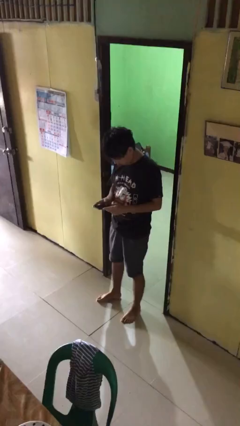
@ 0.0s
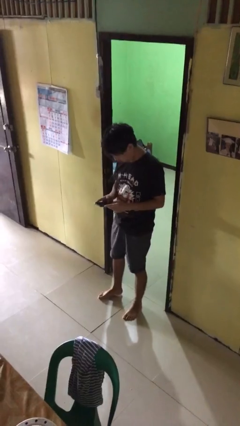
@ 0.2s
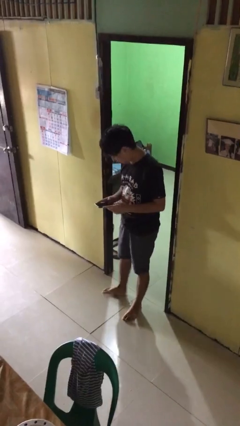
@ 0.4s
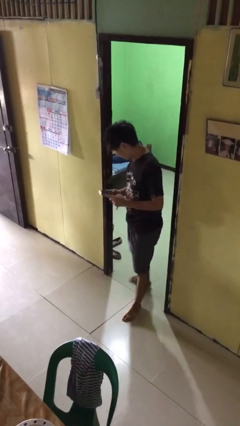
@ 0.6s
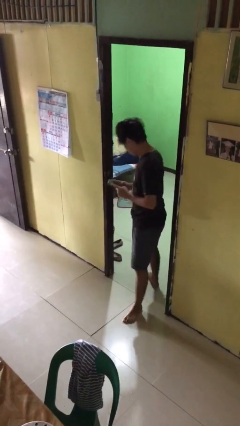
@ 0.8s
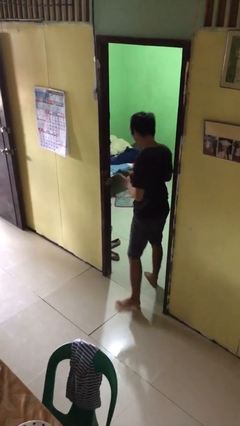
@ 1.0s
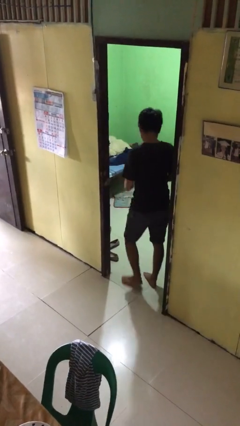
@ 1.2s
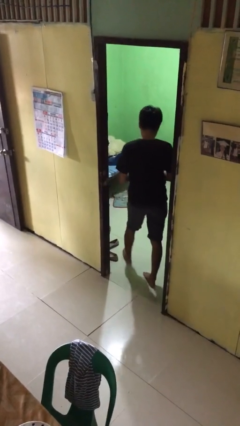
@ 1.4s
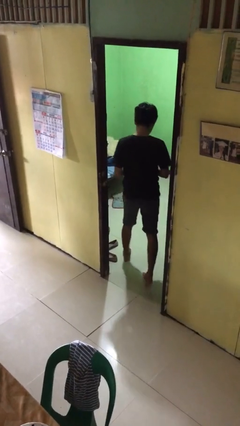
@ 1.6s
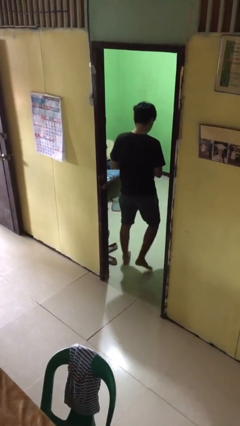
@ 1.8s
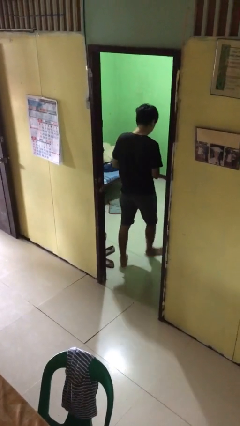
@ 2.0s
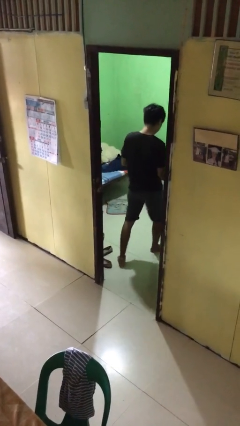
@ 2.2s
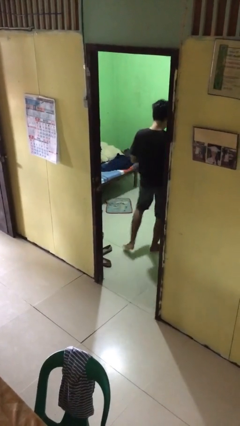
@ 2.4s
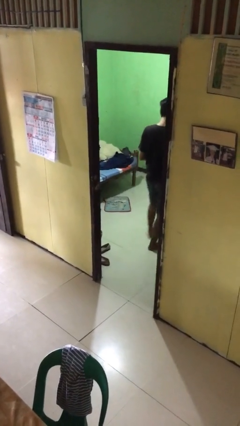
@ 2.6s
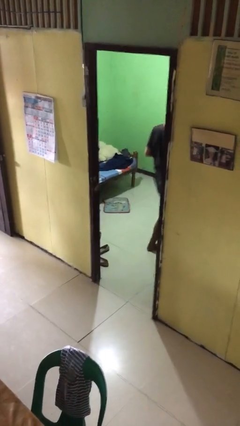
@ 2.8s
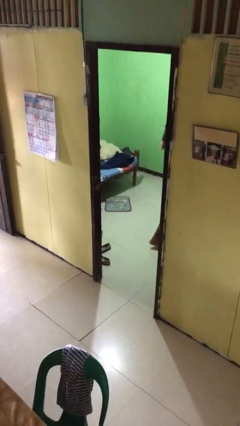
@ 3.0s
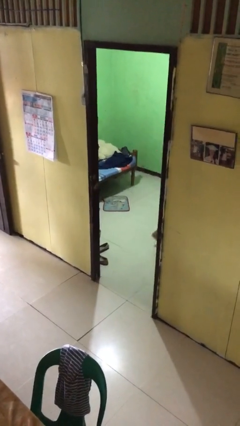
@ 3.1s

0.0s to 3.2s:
person exits scene through structure

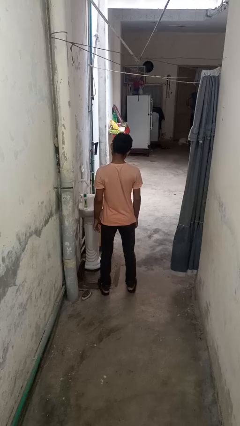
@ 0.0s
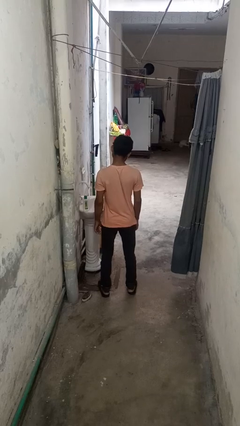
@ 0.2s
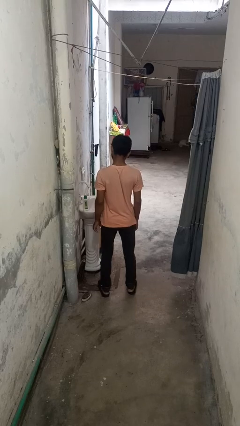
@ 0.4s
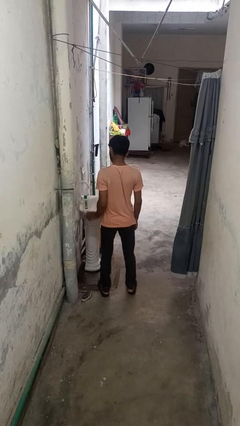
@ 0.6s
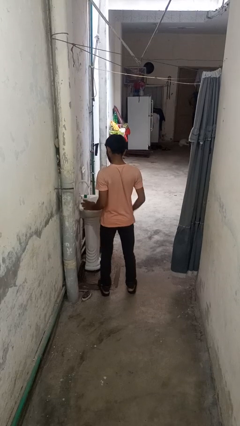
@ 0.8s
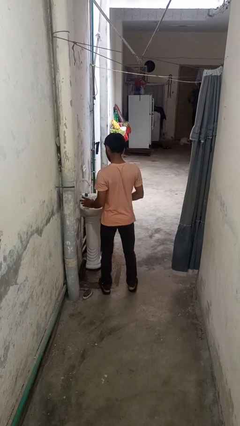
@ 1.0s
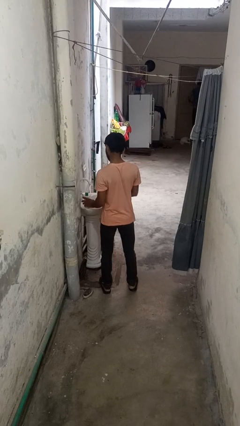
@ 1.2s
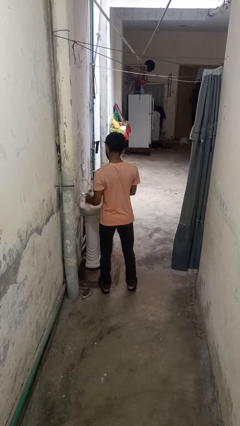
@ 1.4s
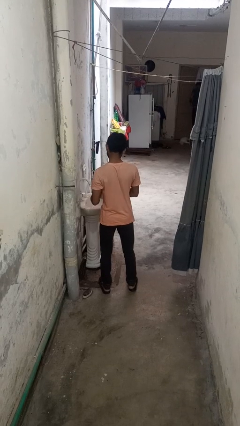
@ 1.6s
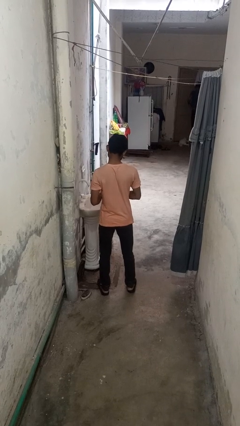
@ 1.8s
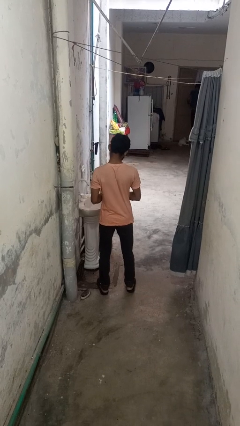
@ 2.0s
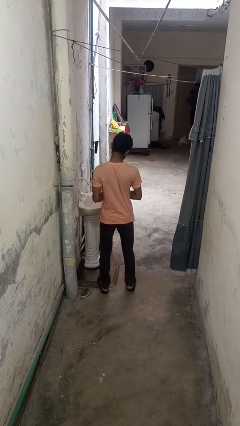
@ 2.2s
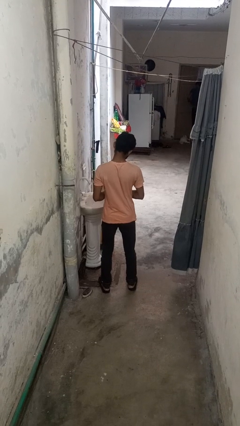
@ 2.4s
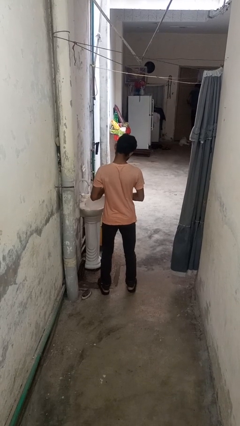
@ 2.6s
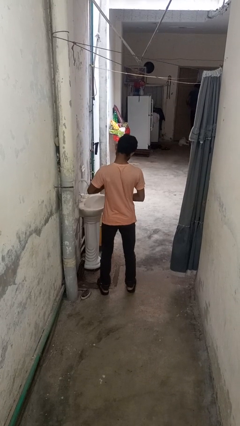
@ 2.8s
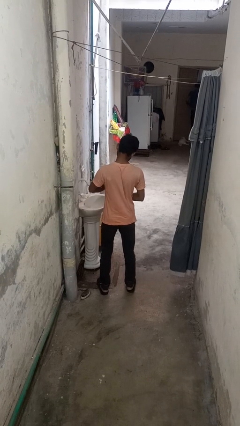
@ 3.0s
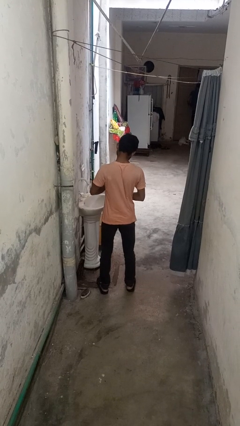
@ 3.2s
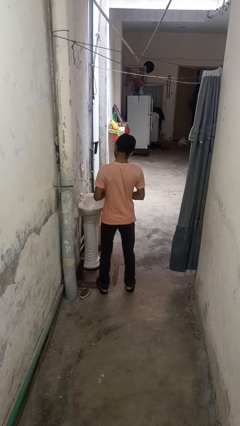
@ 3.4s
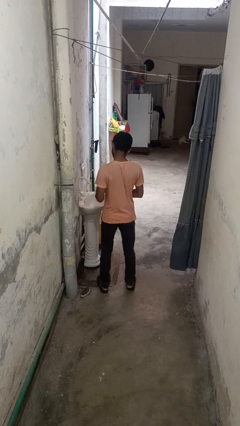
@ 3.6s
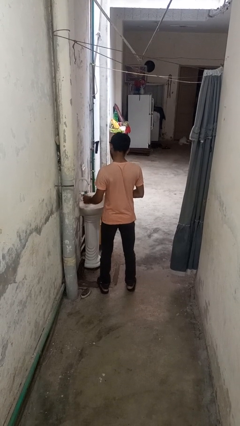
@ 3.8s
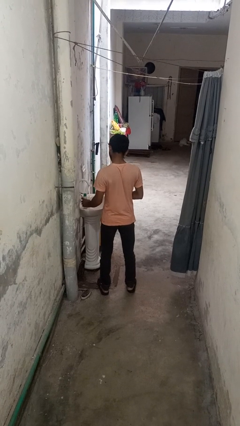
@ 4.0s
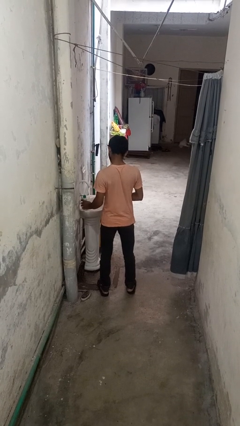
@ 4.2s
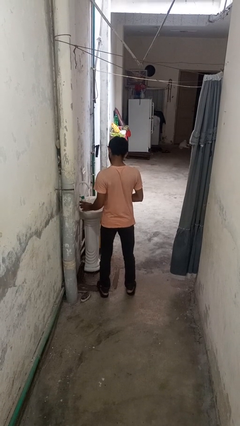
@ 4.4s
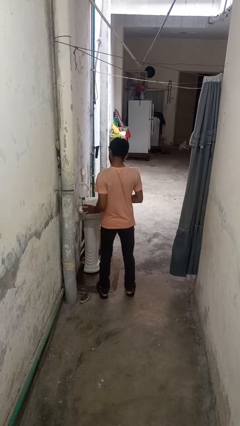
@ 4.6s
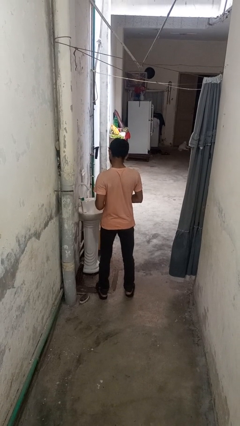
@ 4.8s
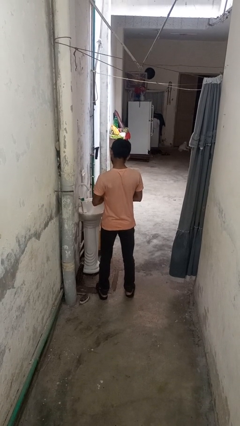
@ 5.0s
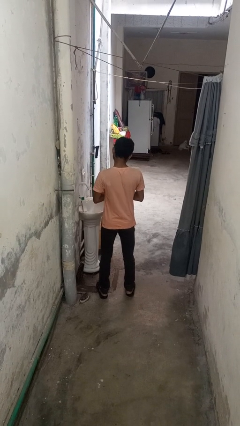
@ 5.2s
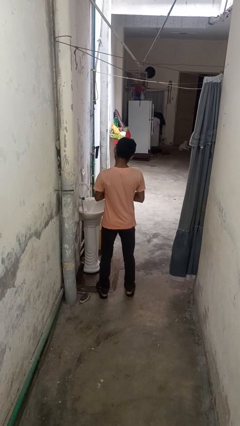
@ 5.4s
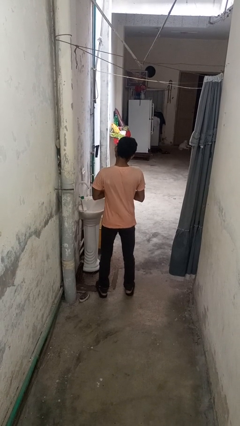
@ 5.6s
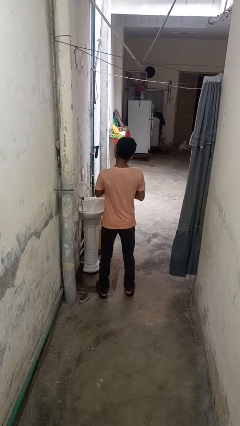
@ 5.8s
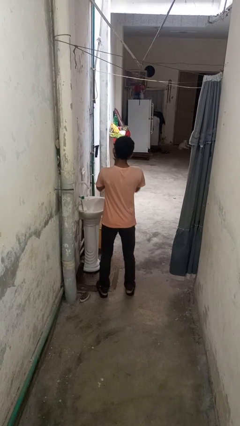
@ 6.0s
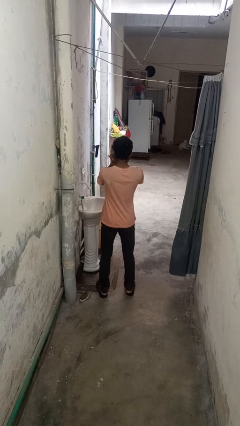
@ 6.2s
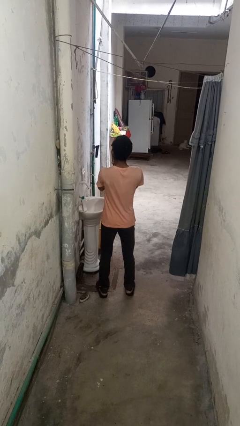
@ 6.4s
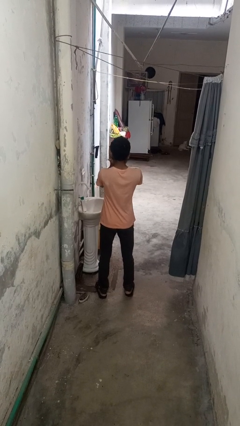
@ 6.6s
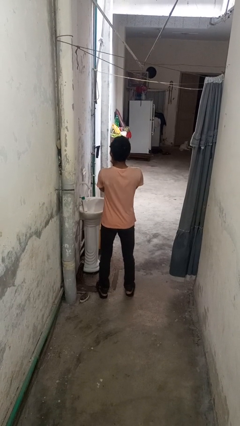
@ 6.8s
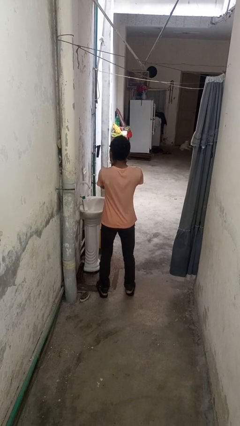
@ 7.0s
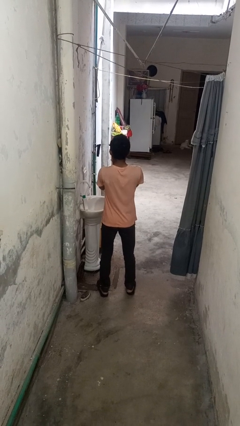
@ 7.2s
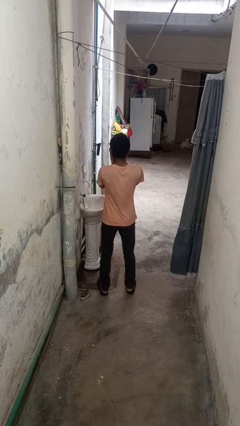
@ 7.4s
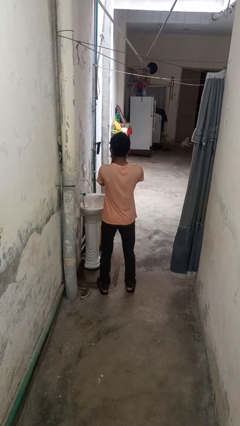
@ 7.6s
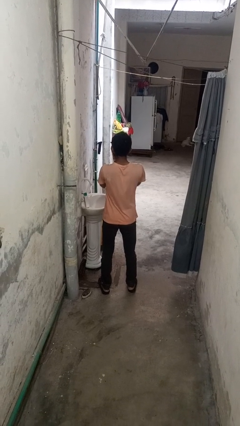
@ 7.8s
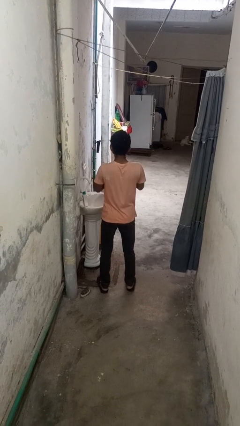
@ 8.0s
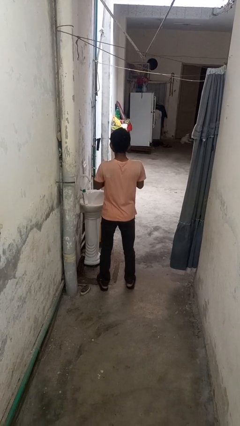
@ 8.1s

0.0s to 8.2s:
person applies sunscreen

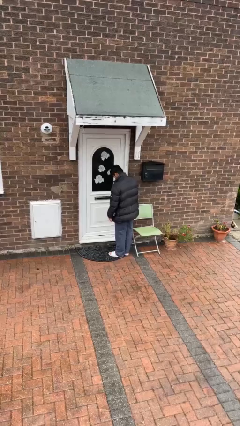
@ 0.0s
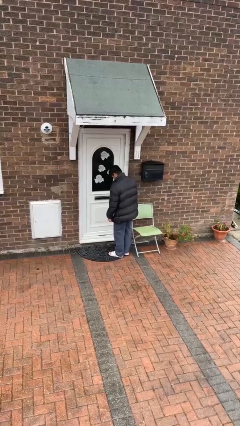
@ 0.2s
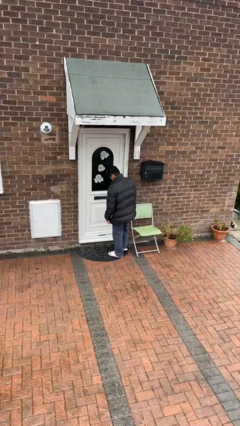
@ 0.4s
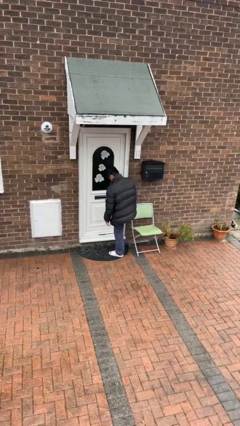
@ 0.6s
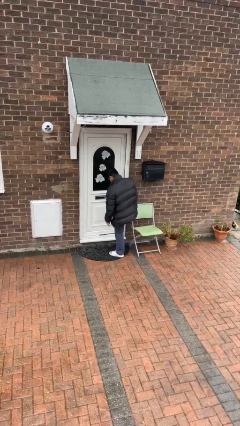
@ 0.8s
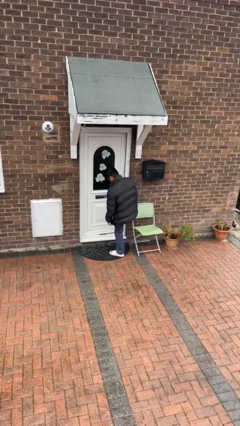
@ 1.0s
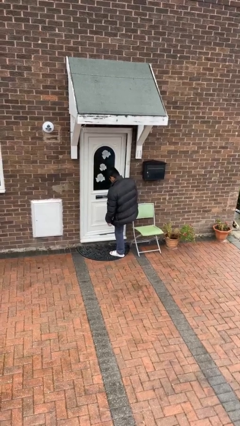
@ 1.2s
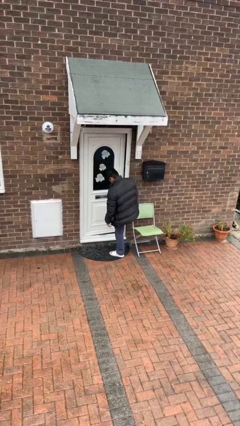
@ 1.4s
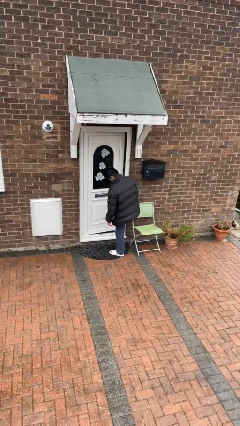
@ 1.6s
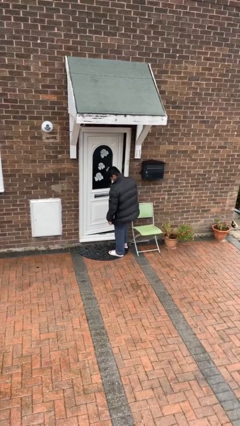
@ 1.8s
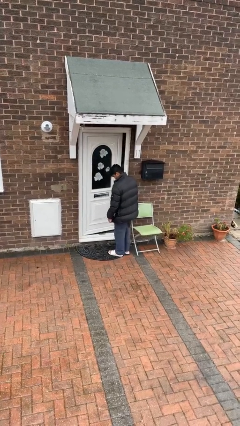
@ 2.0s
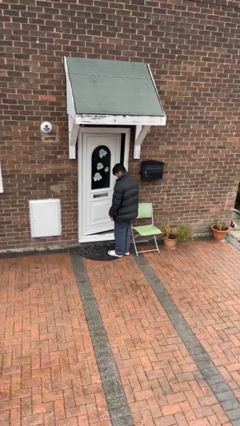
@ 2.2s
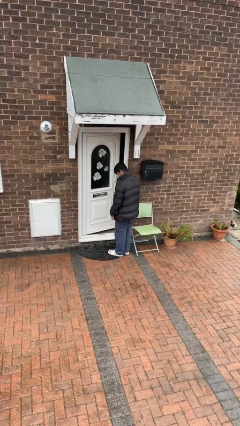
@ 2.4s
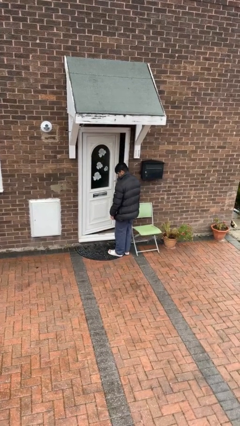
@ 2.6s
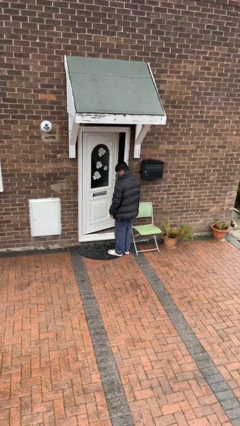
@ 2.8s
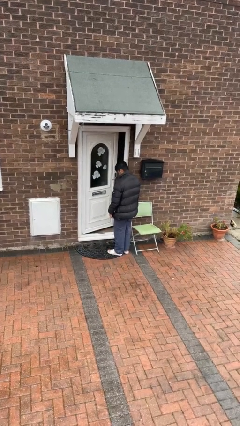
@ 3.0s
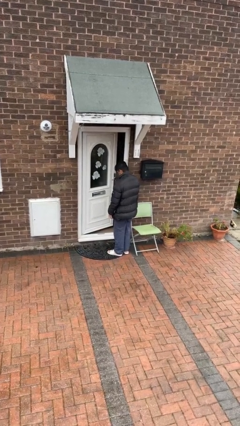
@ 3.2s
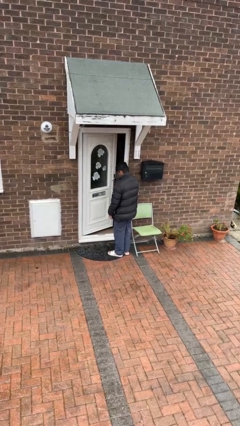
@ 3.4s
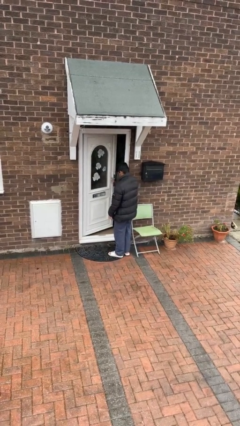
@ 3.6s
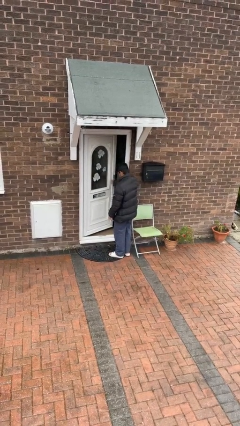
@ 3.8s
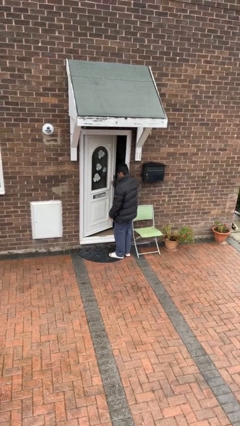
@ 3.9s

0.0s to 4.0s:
person opens facility door

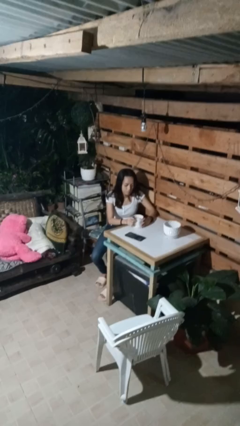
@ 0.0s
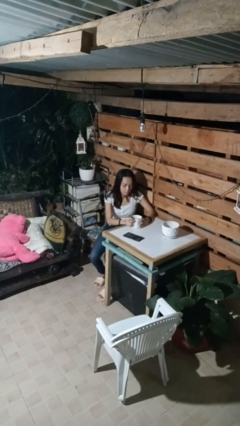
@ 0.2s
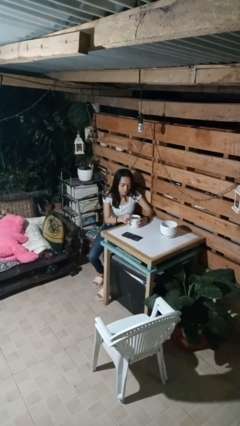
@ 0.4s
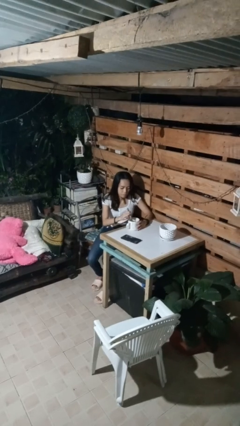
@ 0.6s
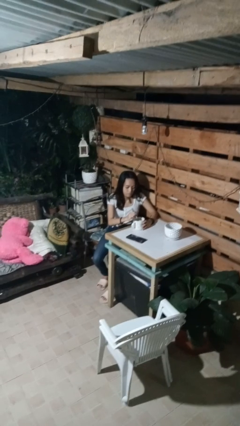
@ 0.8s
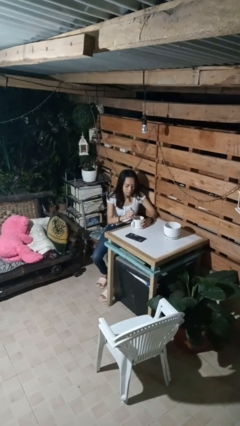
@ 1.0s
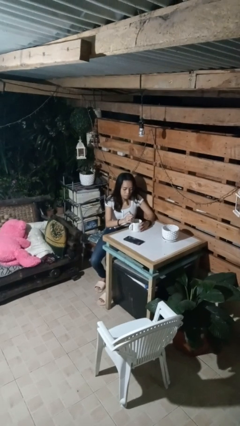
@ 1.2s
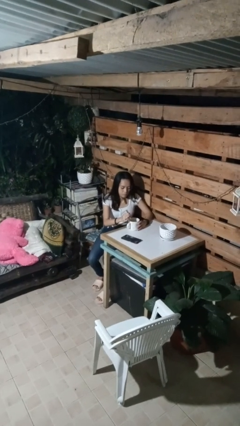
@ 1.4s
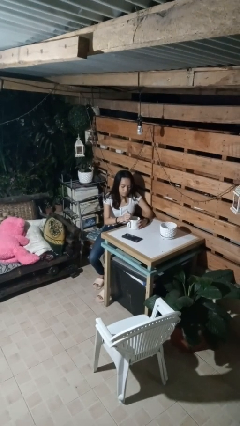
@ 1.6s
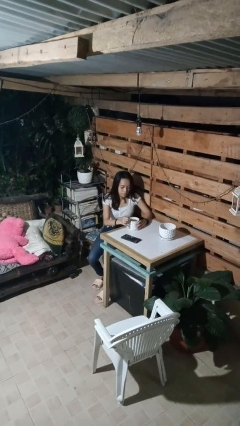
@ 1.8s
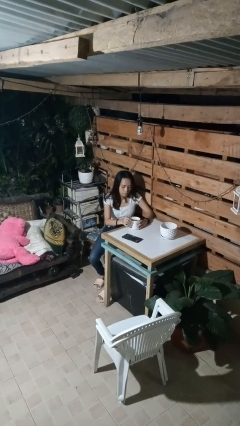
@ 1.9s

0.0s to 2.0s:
person stirs mug

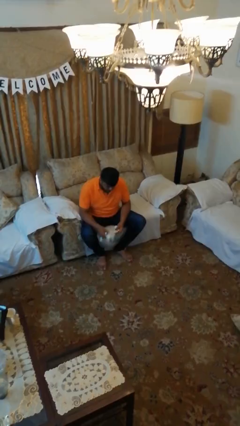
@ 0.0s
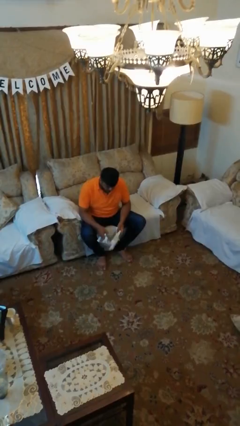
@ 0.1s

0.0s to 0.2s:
person puts on gloves
